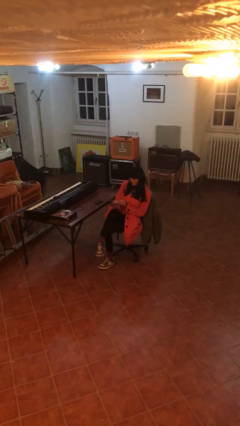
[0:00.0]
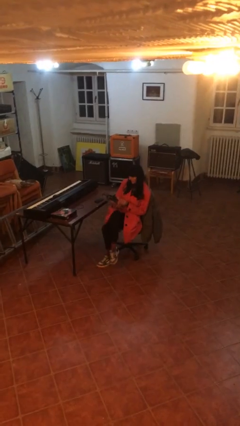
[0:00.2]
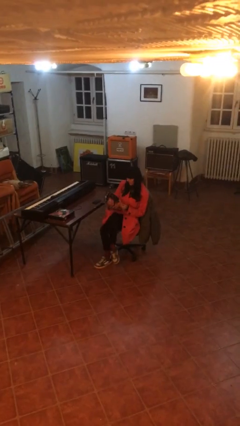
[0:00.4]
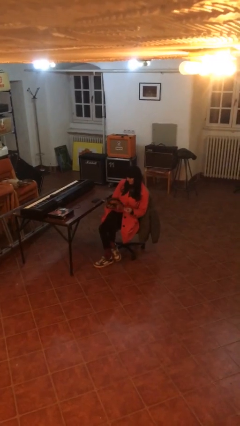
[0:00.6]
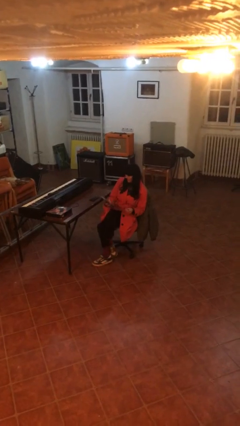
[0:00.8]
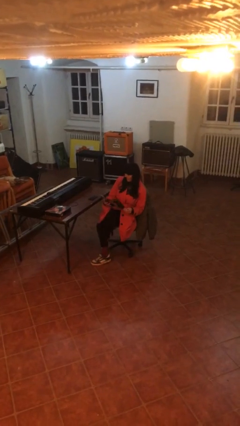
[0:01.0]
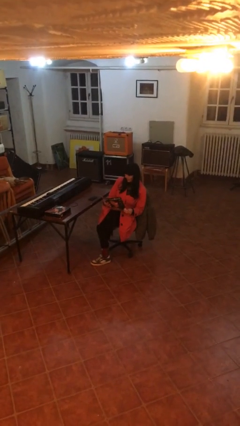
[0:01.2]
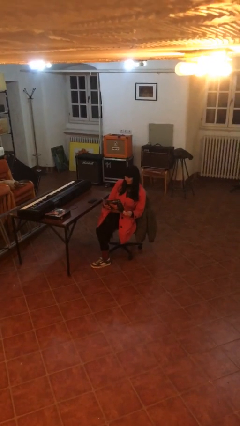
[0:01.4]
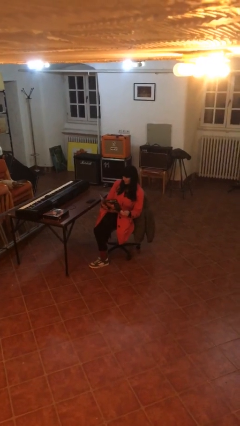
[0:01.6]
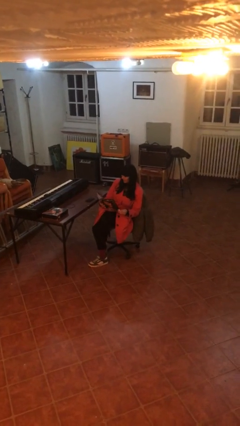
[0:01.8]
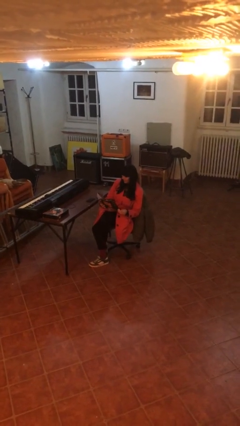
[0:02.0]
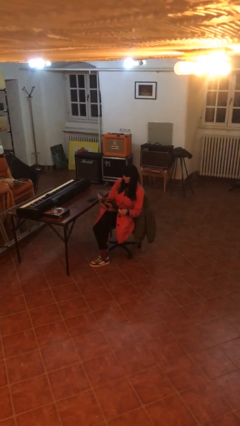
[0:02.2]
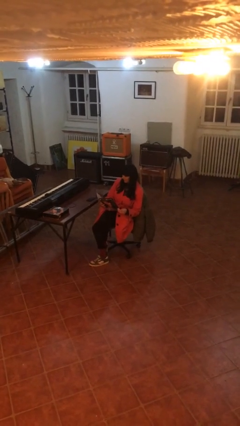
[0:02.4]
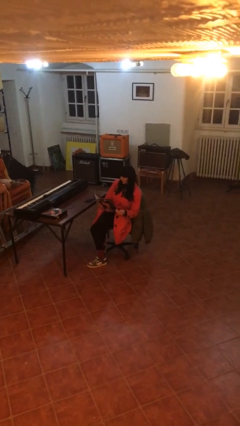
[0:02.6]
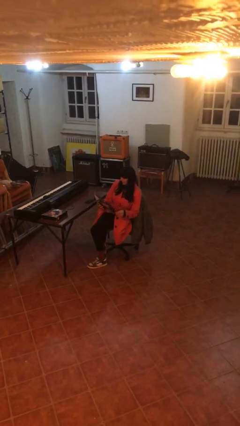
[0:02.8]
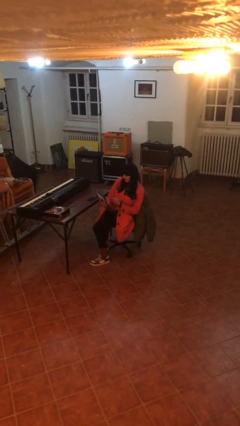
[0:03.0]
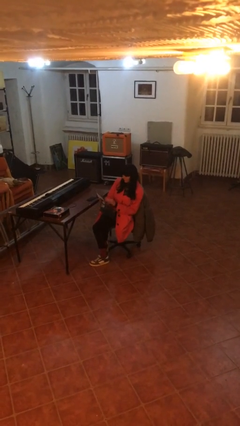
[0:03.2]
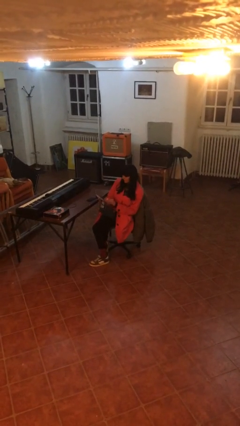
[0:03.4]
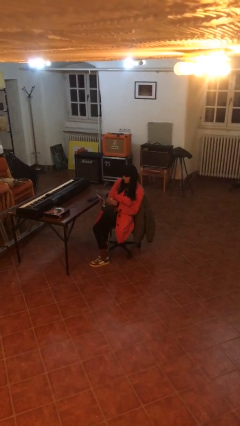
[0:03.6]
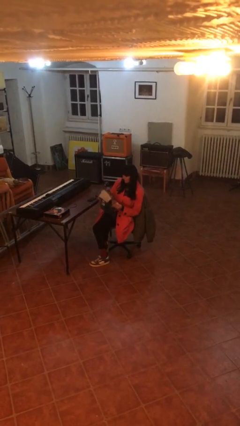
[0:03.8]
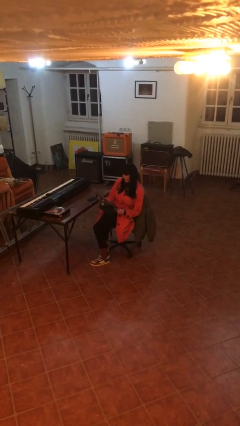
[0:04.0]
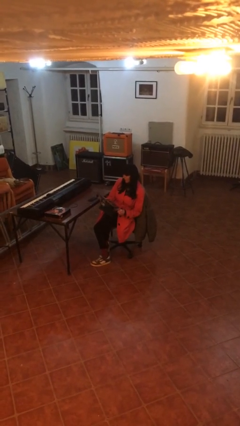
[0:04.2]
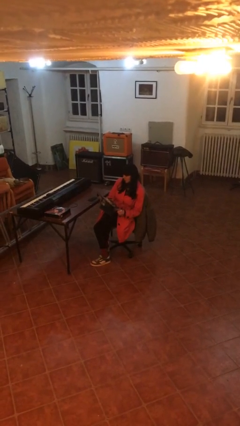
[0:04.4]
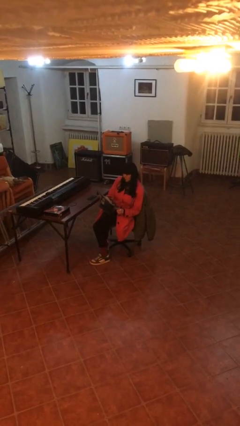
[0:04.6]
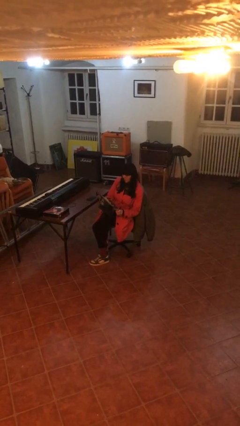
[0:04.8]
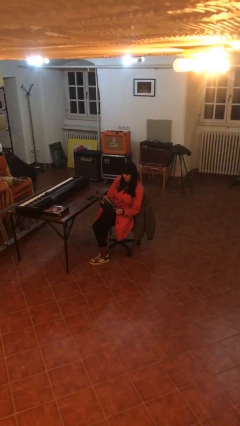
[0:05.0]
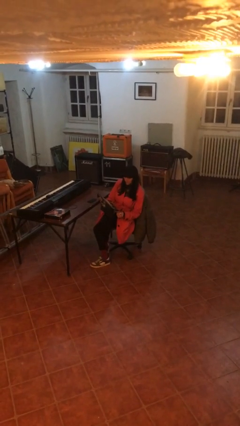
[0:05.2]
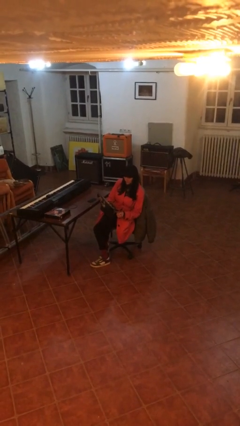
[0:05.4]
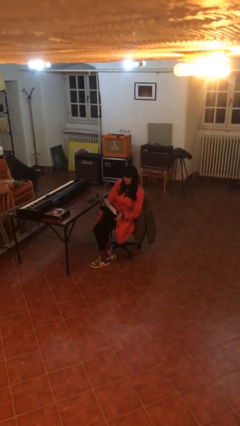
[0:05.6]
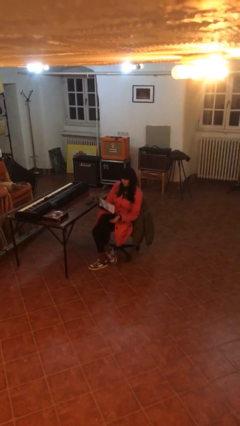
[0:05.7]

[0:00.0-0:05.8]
person reads document

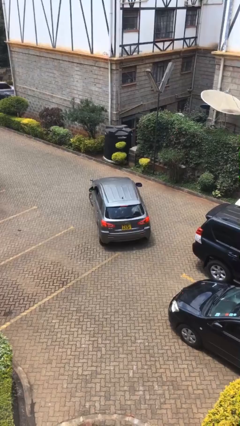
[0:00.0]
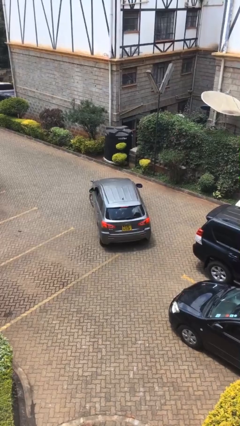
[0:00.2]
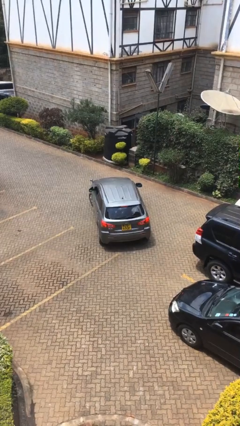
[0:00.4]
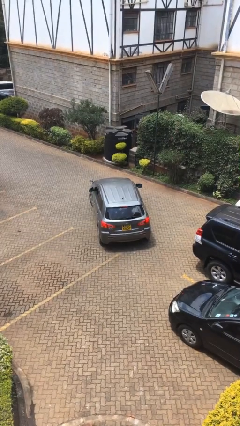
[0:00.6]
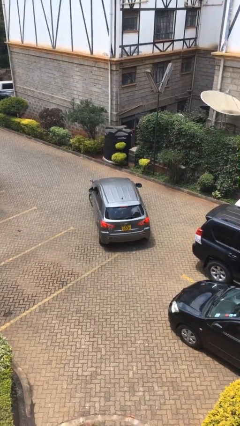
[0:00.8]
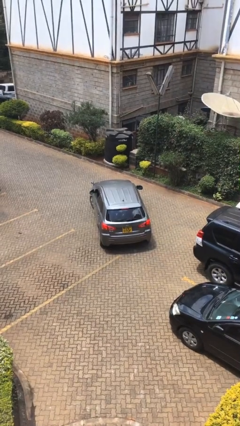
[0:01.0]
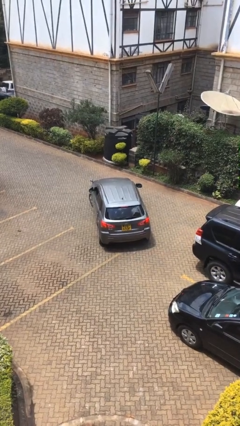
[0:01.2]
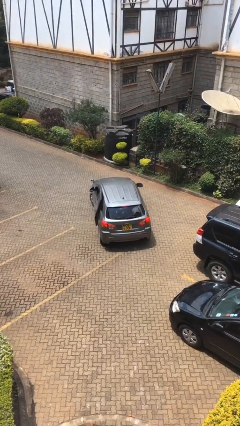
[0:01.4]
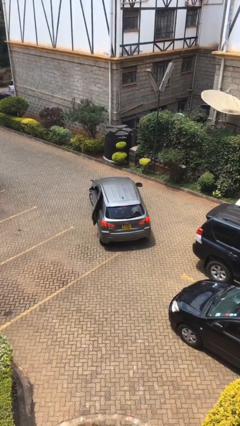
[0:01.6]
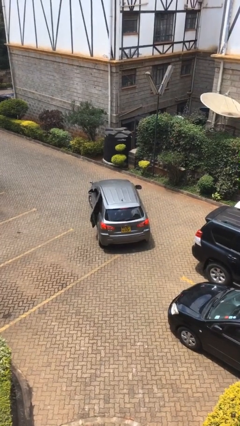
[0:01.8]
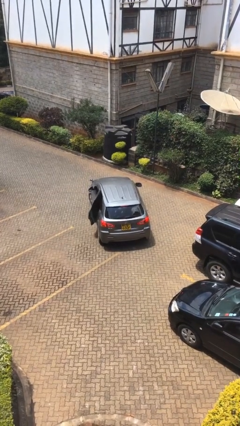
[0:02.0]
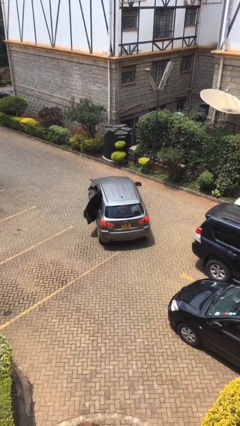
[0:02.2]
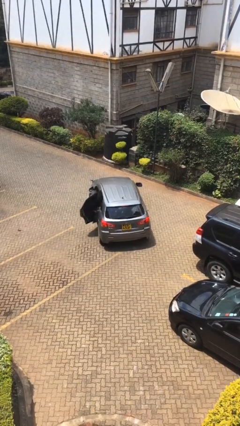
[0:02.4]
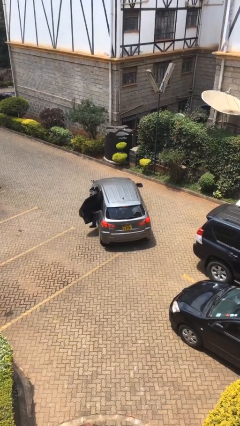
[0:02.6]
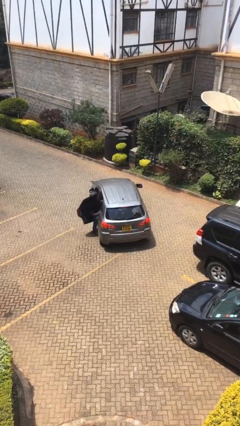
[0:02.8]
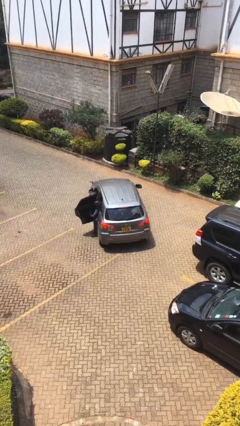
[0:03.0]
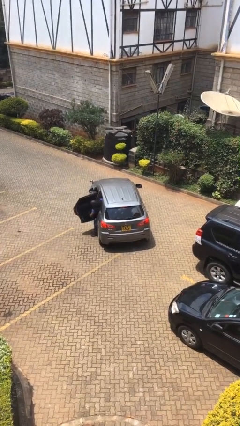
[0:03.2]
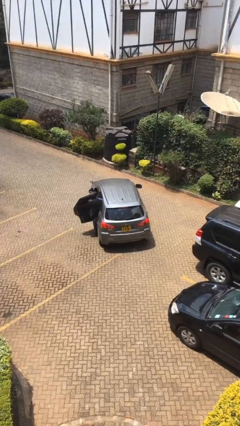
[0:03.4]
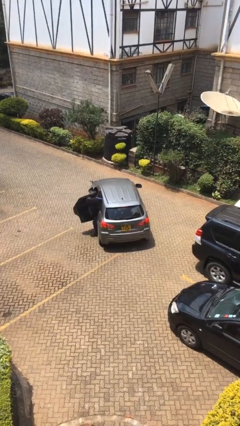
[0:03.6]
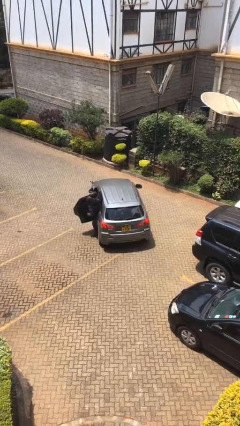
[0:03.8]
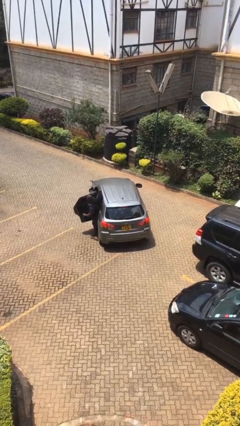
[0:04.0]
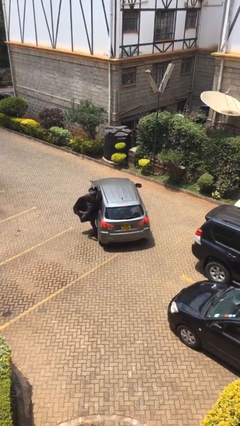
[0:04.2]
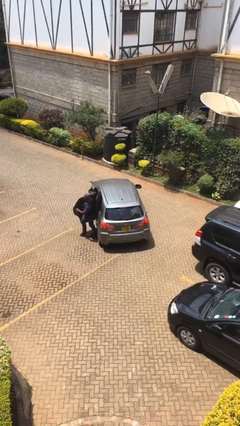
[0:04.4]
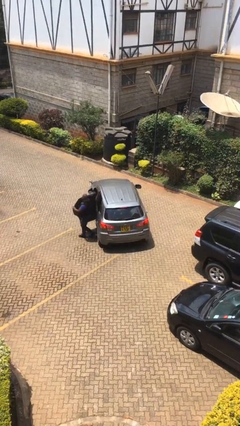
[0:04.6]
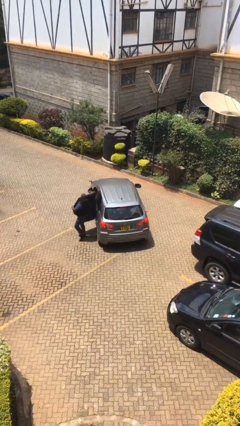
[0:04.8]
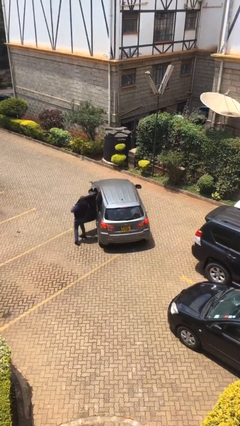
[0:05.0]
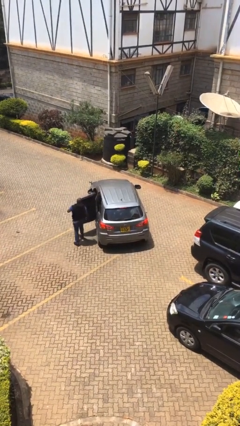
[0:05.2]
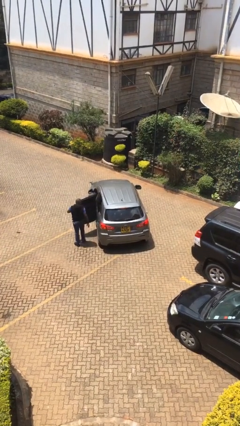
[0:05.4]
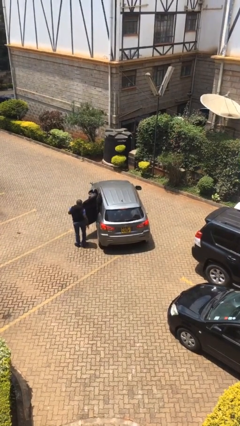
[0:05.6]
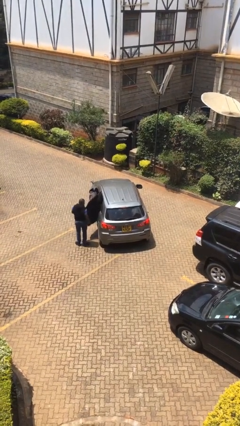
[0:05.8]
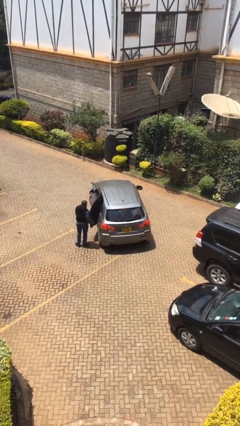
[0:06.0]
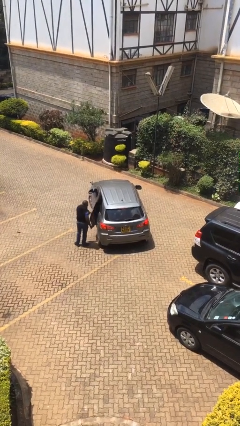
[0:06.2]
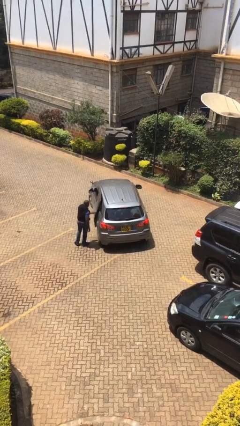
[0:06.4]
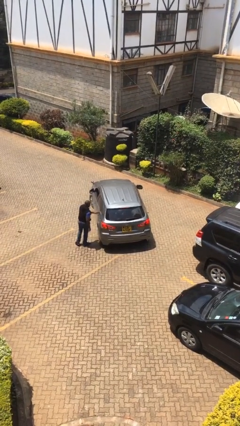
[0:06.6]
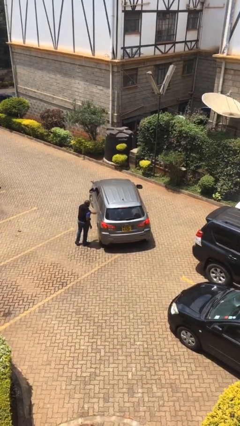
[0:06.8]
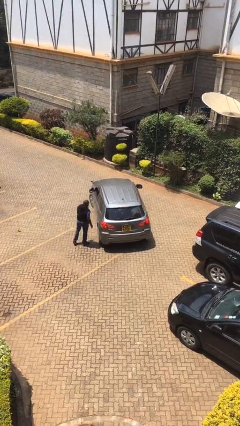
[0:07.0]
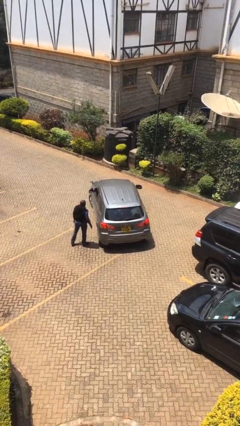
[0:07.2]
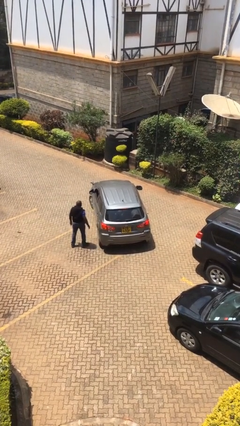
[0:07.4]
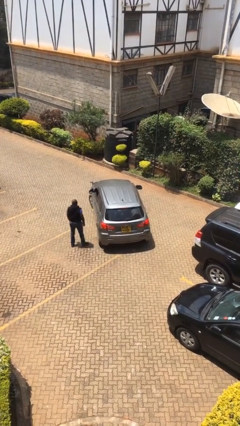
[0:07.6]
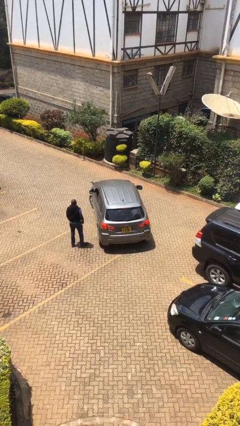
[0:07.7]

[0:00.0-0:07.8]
car drops off person

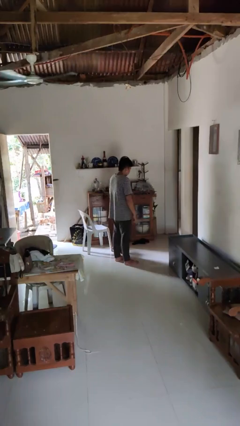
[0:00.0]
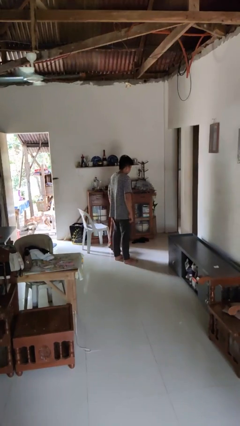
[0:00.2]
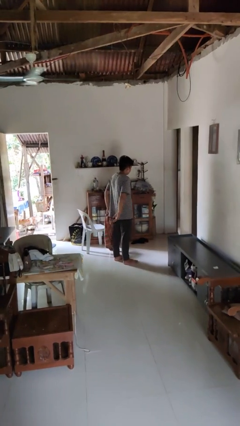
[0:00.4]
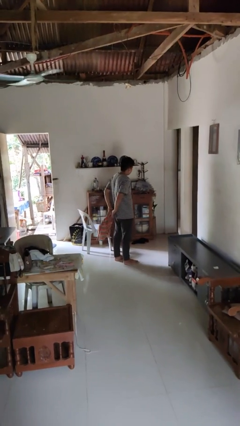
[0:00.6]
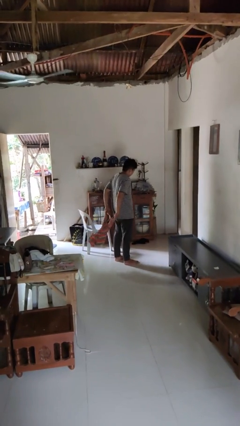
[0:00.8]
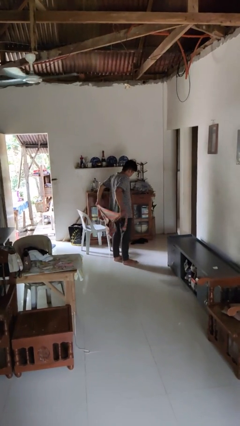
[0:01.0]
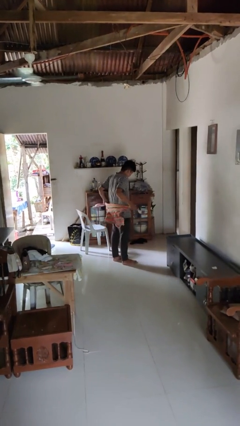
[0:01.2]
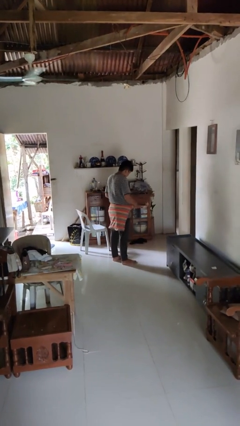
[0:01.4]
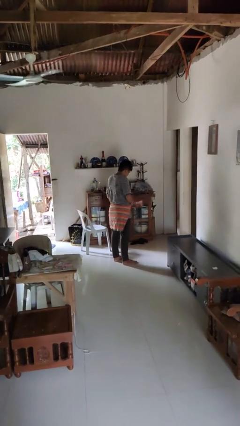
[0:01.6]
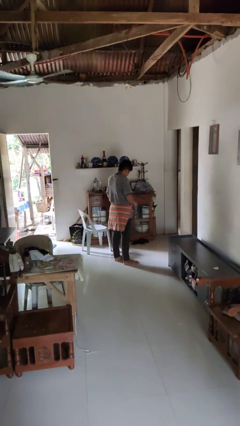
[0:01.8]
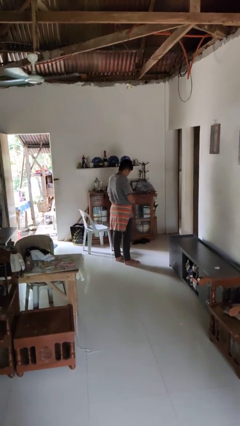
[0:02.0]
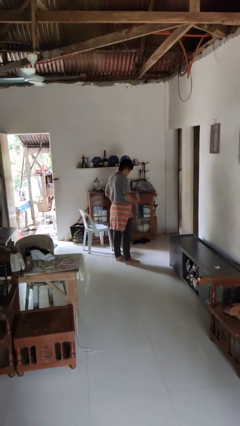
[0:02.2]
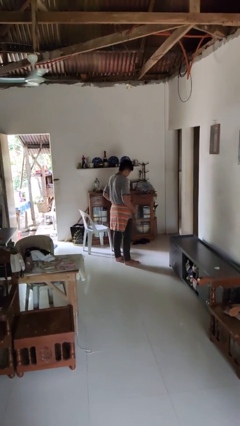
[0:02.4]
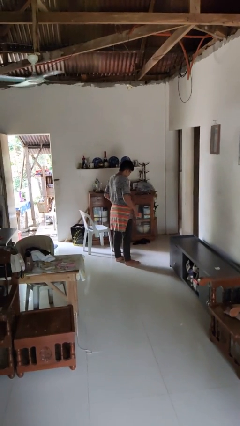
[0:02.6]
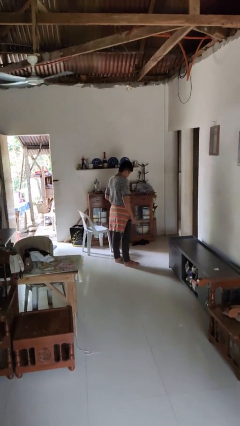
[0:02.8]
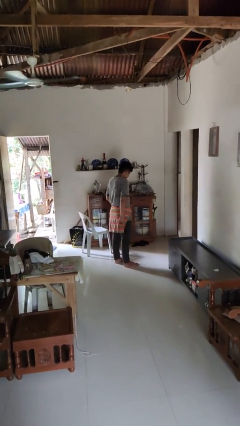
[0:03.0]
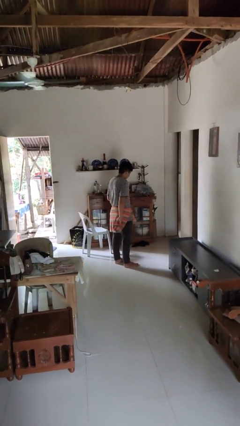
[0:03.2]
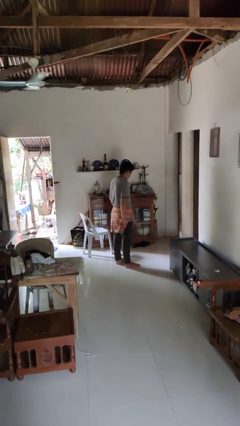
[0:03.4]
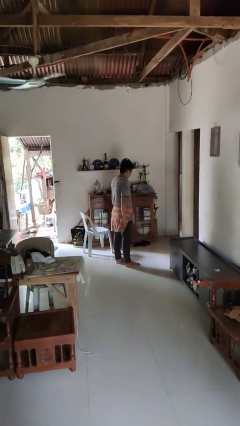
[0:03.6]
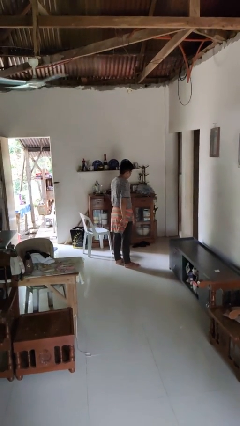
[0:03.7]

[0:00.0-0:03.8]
person ties jacket around waist

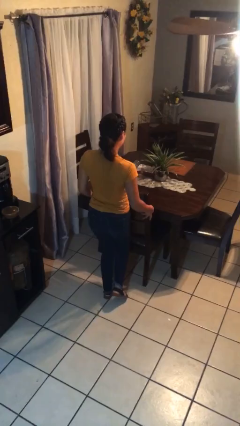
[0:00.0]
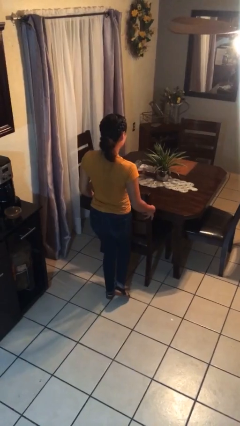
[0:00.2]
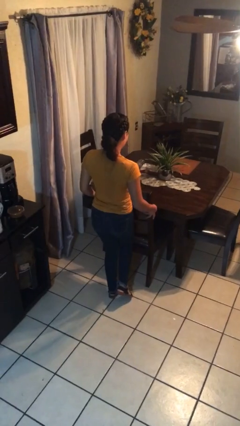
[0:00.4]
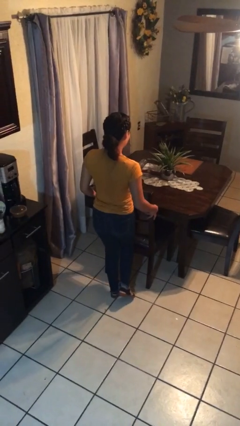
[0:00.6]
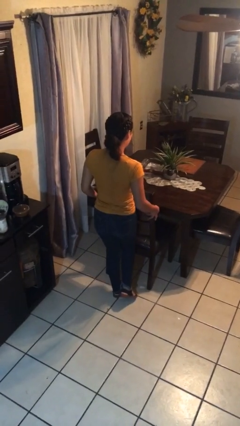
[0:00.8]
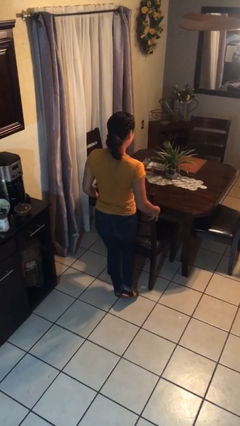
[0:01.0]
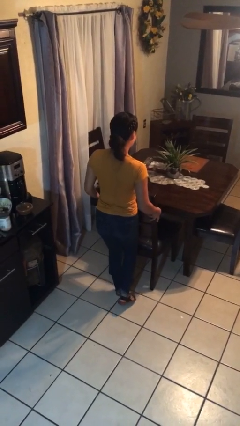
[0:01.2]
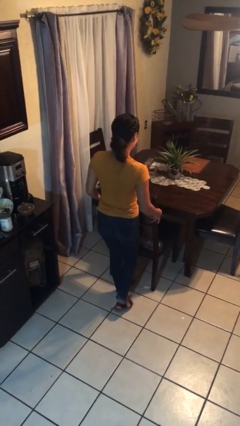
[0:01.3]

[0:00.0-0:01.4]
person pulls out chair
